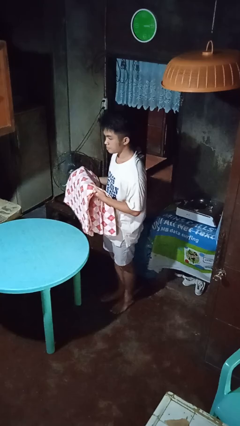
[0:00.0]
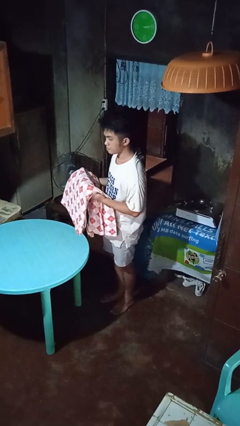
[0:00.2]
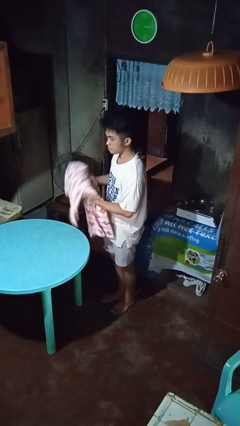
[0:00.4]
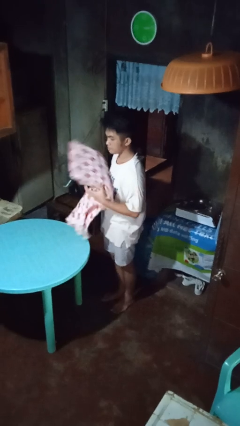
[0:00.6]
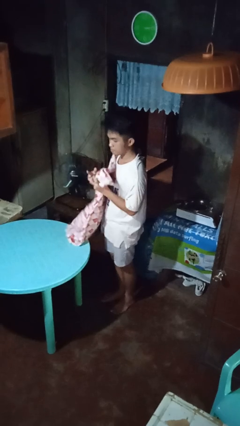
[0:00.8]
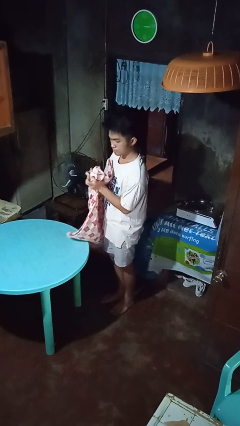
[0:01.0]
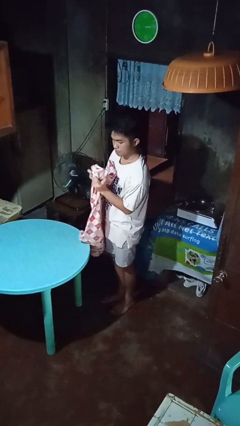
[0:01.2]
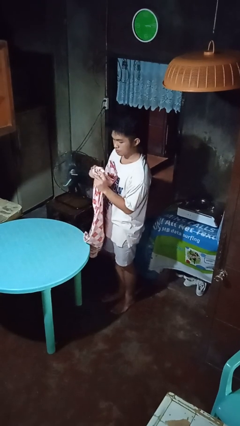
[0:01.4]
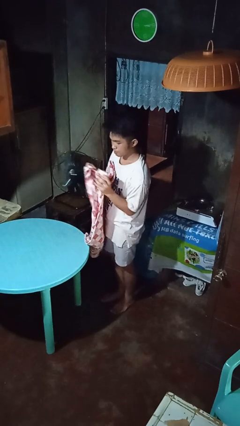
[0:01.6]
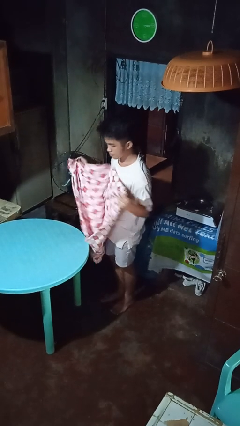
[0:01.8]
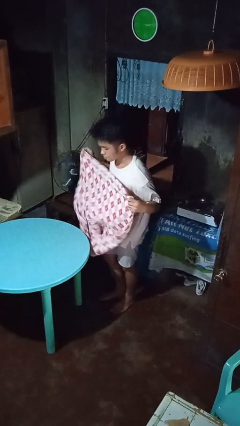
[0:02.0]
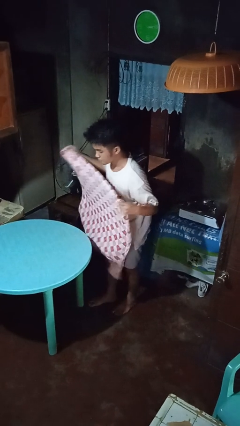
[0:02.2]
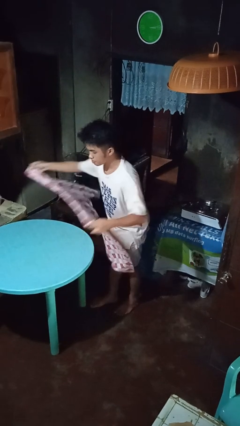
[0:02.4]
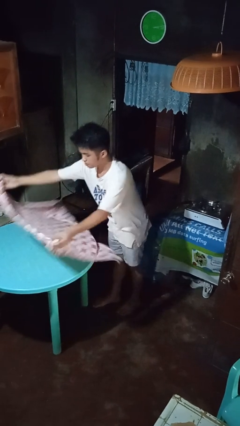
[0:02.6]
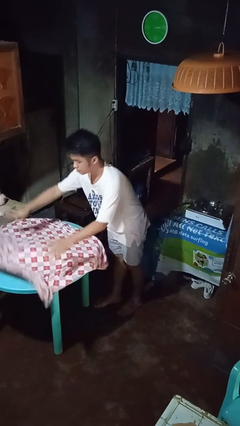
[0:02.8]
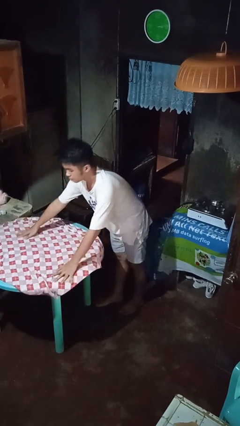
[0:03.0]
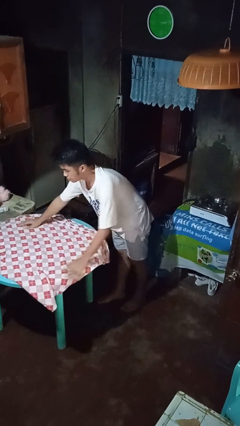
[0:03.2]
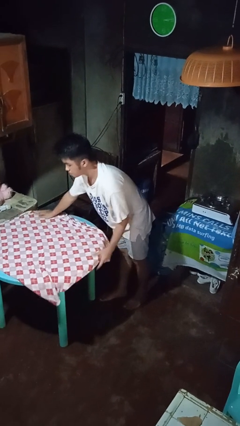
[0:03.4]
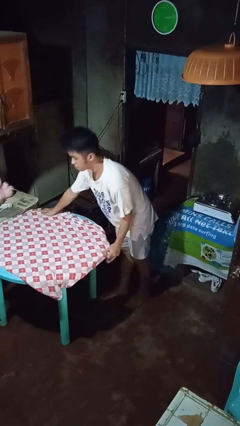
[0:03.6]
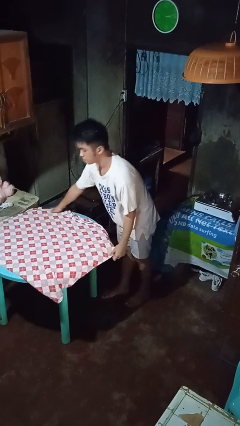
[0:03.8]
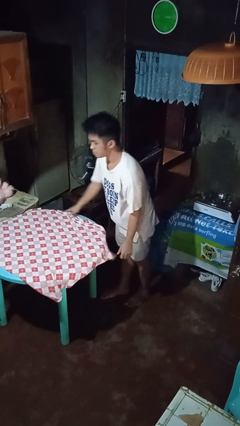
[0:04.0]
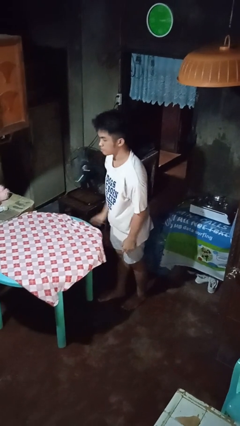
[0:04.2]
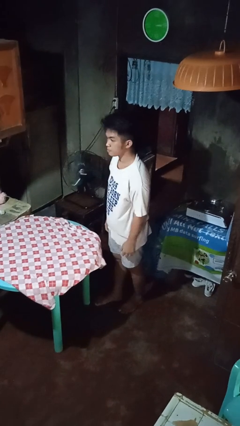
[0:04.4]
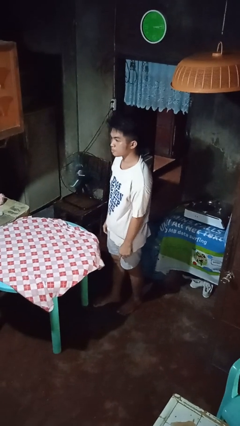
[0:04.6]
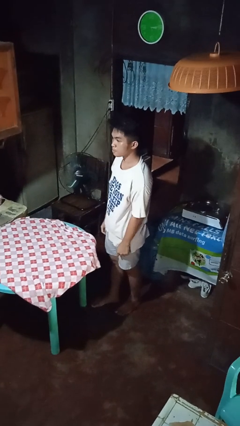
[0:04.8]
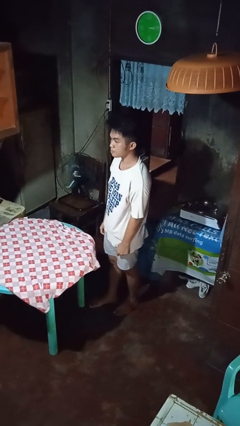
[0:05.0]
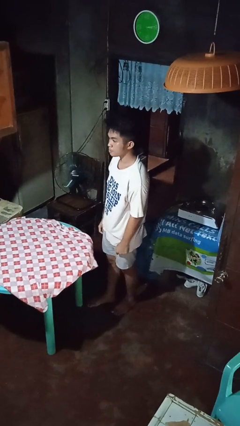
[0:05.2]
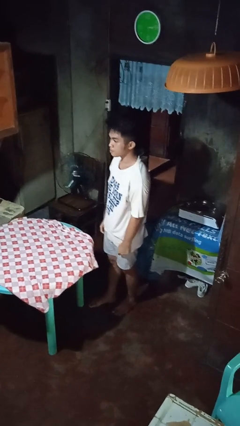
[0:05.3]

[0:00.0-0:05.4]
person spreads tablecloth

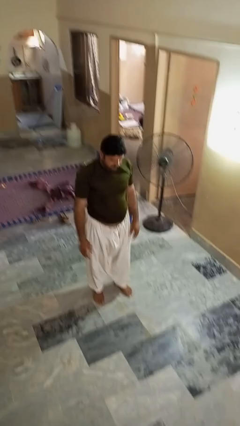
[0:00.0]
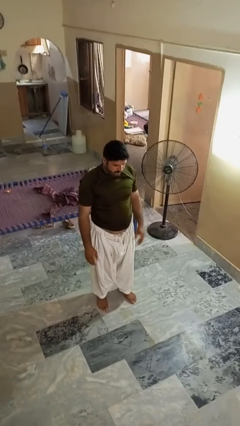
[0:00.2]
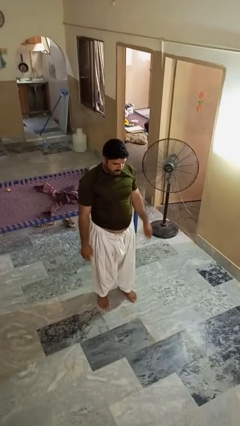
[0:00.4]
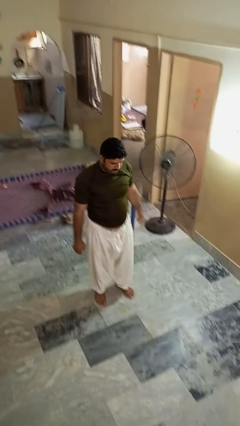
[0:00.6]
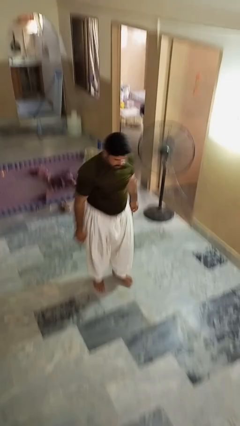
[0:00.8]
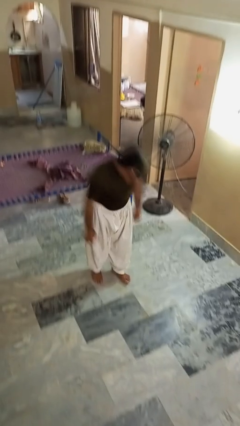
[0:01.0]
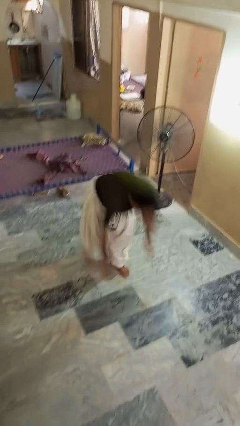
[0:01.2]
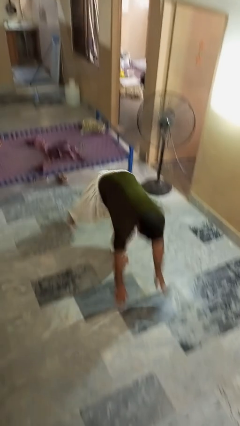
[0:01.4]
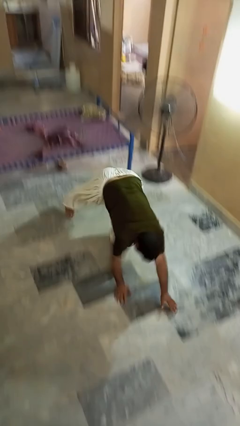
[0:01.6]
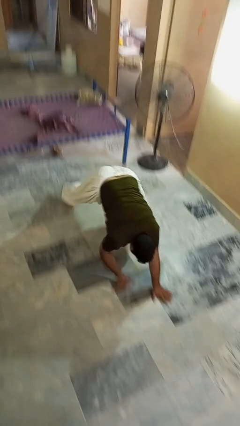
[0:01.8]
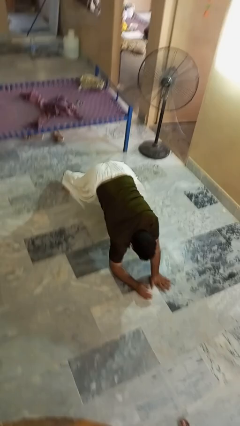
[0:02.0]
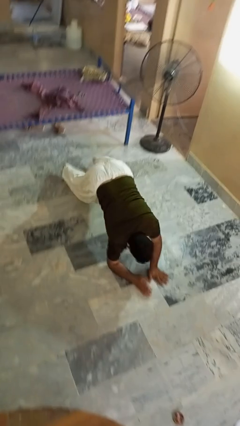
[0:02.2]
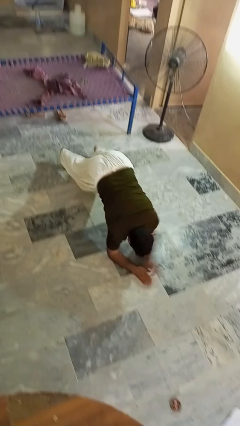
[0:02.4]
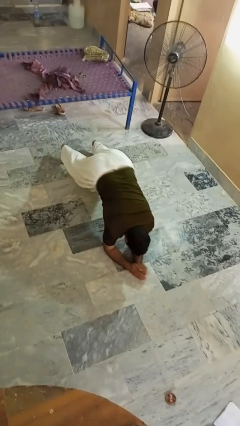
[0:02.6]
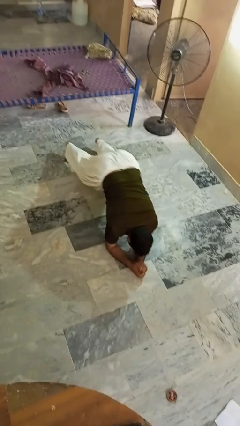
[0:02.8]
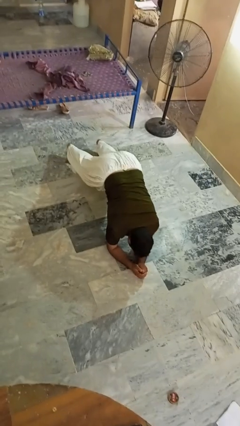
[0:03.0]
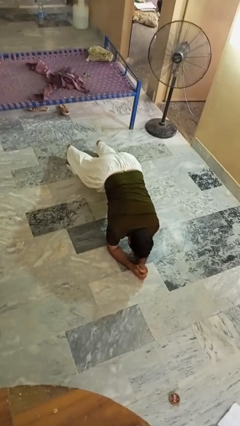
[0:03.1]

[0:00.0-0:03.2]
person exercises with plank

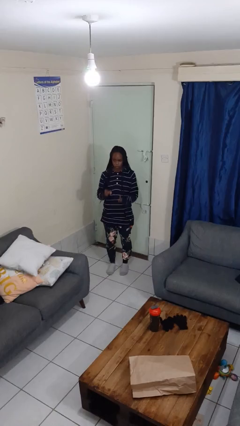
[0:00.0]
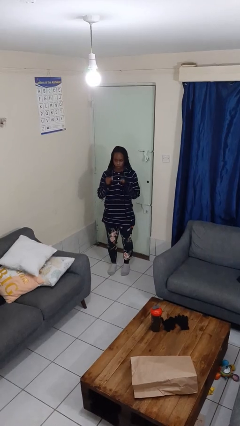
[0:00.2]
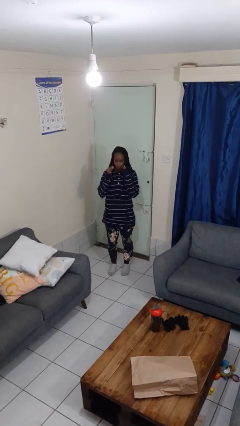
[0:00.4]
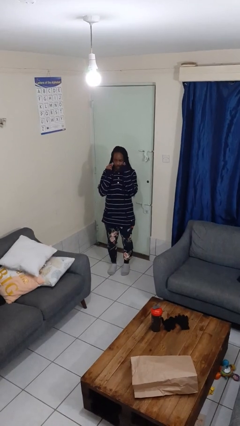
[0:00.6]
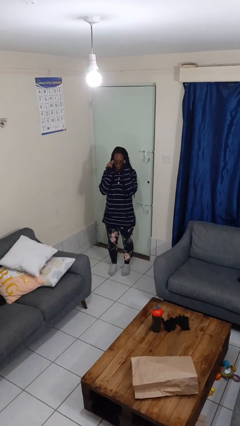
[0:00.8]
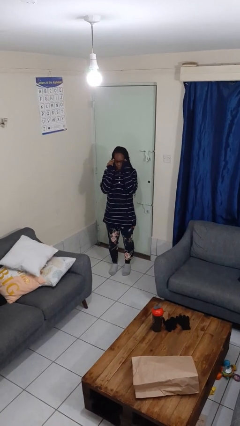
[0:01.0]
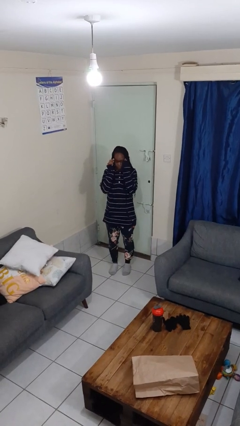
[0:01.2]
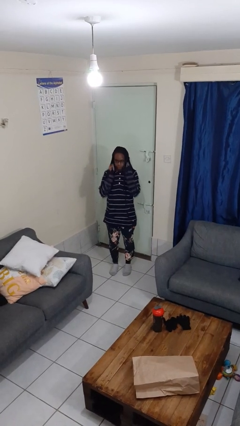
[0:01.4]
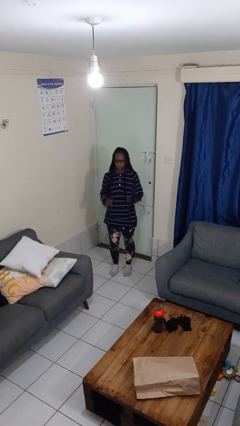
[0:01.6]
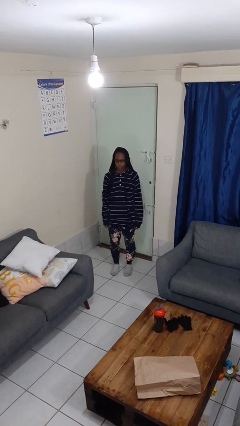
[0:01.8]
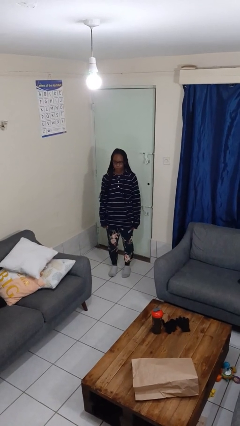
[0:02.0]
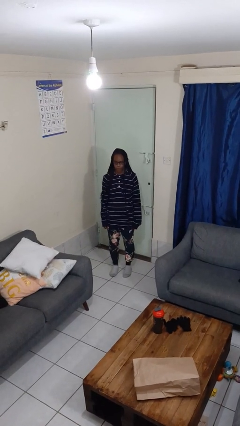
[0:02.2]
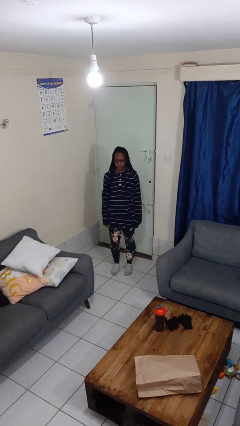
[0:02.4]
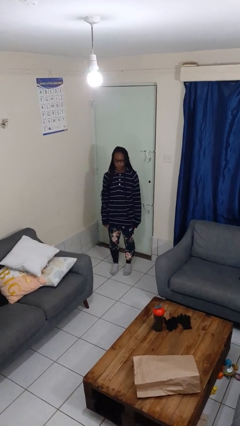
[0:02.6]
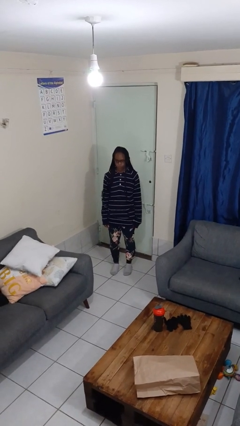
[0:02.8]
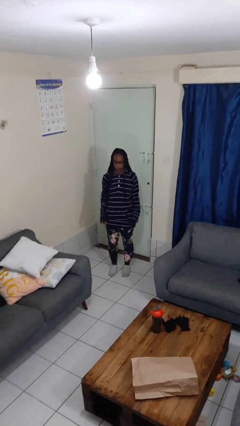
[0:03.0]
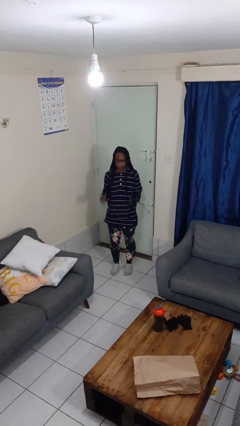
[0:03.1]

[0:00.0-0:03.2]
person puts on glasses

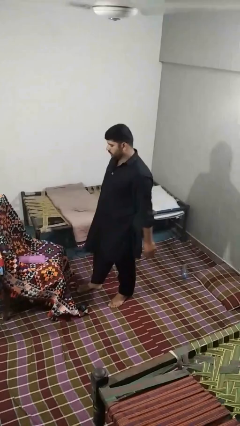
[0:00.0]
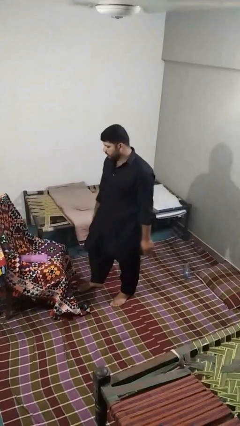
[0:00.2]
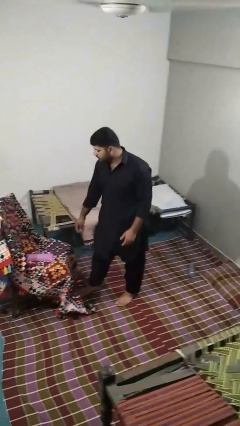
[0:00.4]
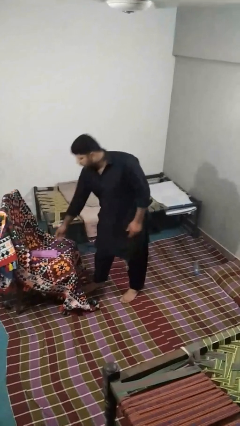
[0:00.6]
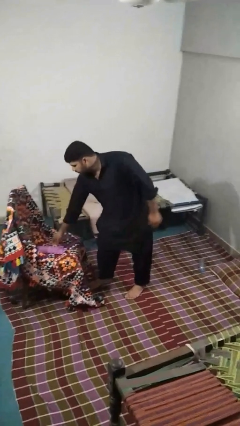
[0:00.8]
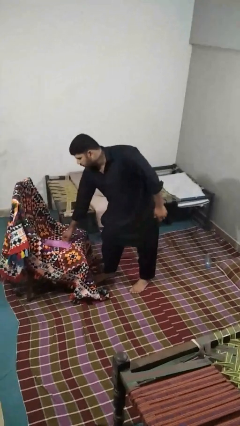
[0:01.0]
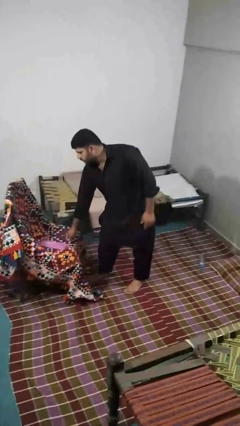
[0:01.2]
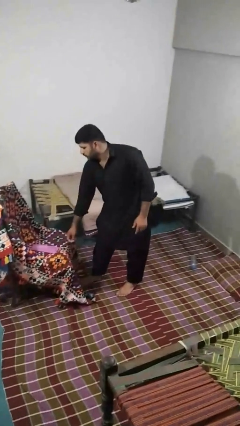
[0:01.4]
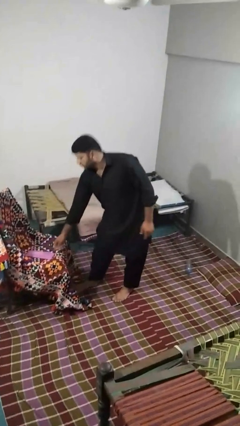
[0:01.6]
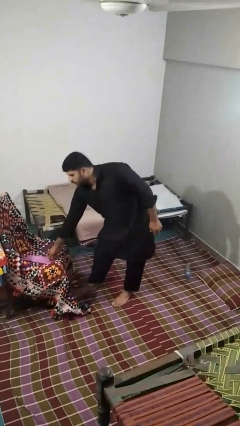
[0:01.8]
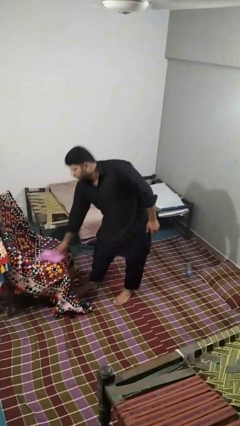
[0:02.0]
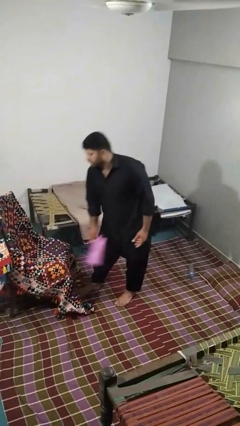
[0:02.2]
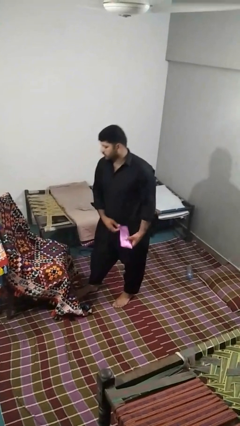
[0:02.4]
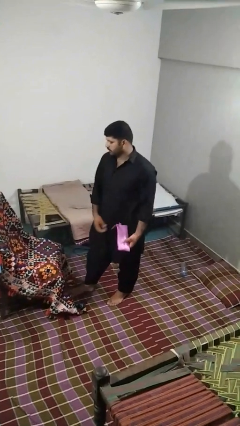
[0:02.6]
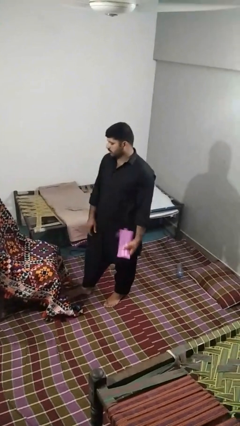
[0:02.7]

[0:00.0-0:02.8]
person picks up object from couch

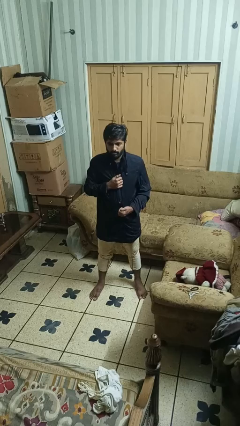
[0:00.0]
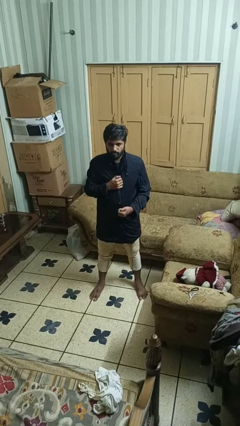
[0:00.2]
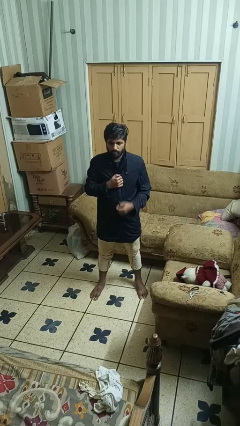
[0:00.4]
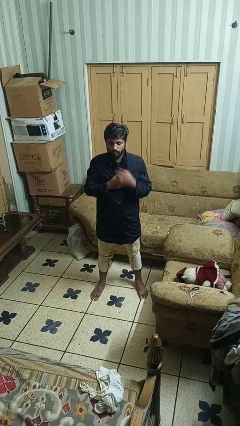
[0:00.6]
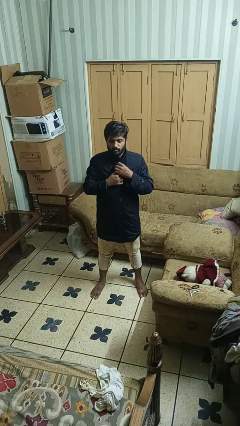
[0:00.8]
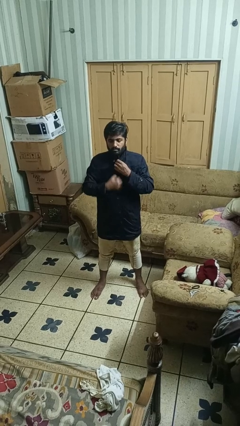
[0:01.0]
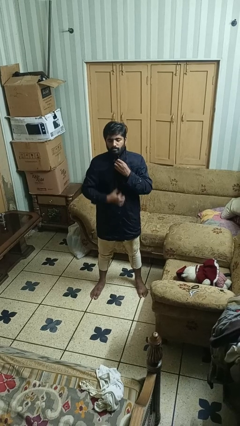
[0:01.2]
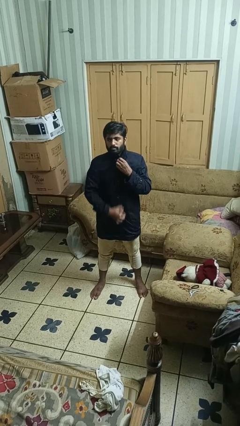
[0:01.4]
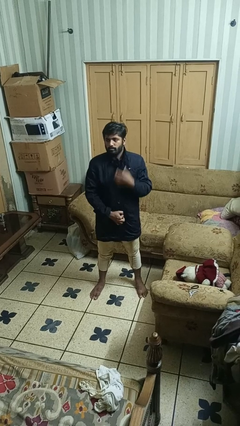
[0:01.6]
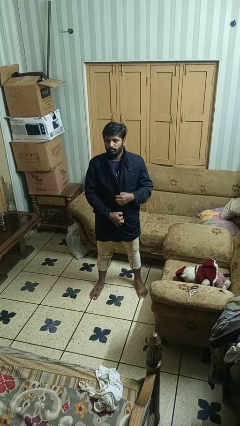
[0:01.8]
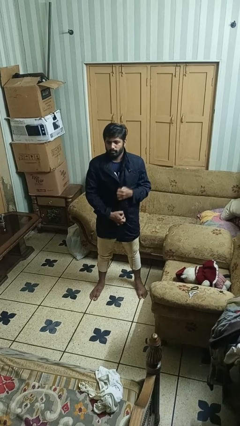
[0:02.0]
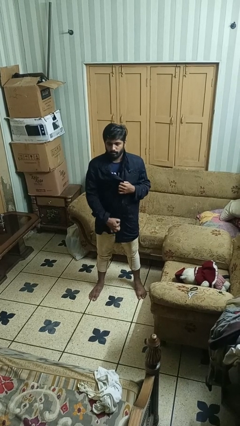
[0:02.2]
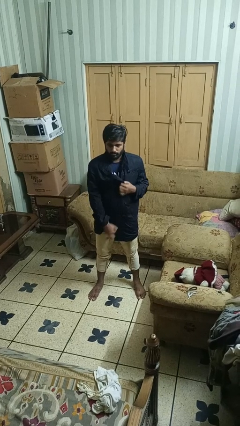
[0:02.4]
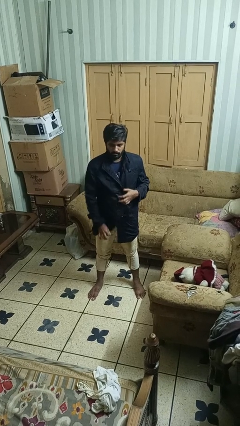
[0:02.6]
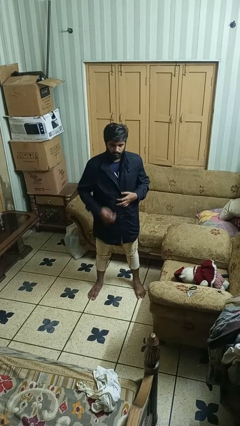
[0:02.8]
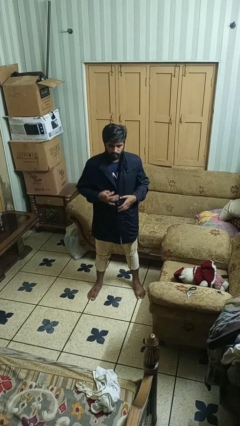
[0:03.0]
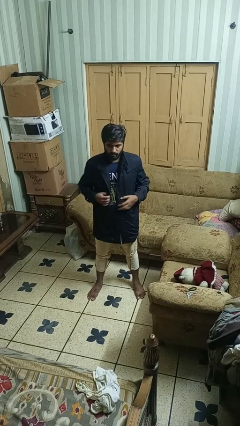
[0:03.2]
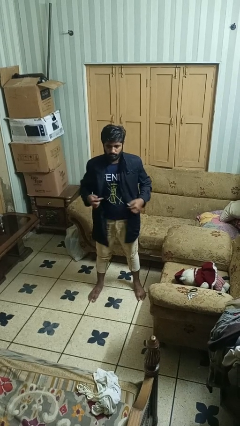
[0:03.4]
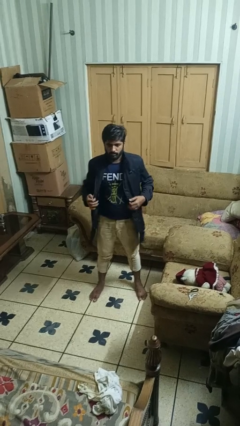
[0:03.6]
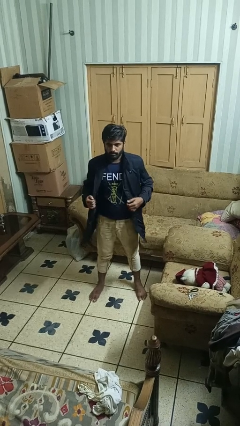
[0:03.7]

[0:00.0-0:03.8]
person unzips jacket
